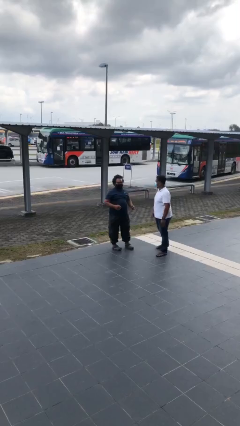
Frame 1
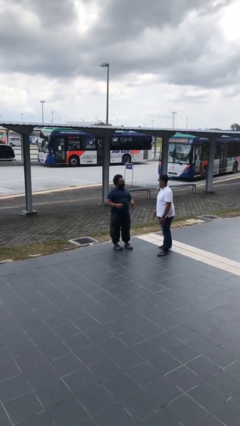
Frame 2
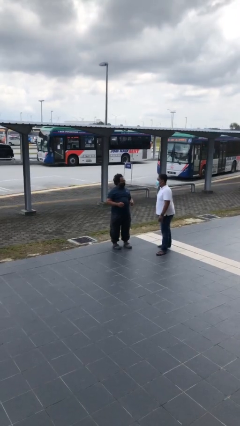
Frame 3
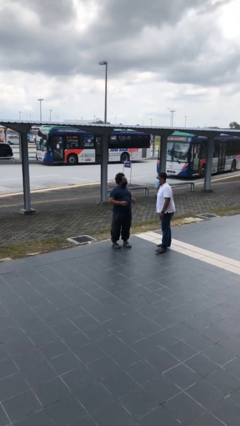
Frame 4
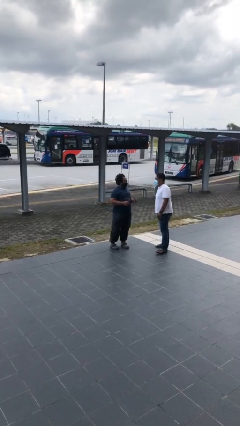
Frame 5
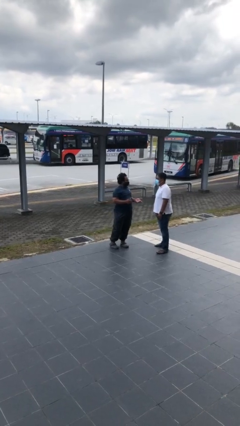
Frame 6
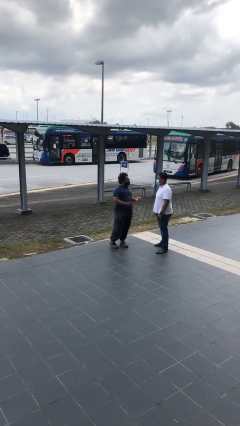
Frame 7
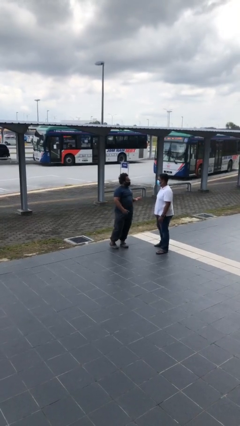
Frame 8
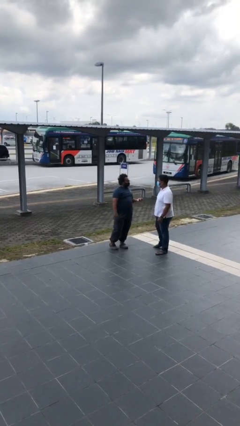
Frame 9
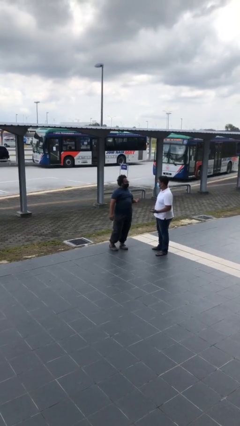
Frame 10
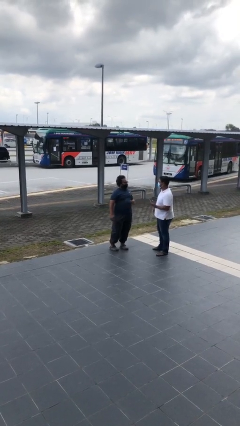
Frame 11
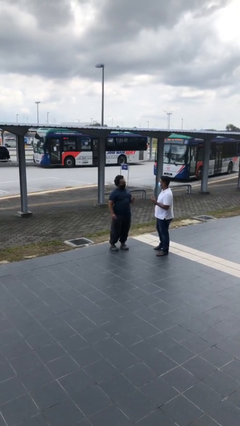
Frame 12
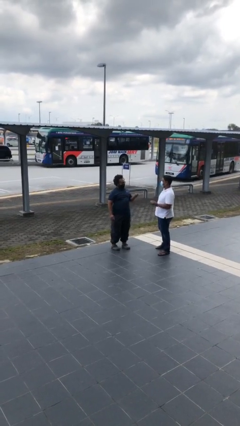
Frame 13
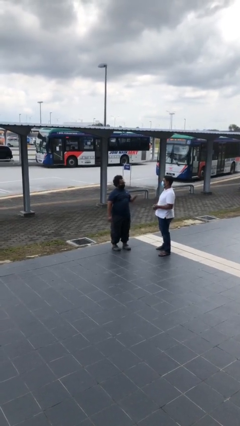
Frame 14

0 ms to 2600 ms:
person talks to person

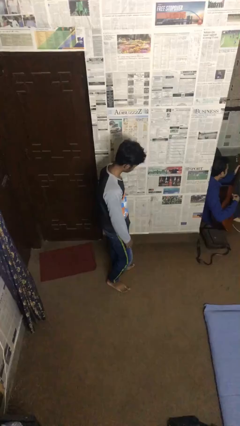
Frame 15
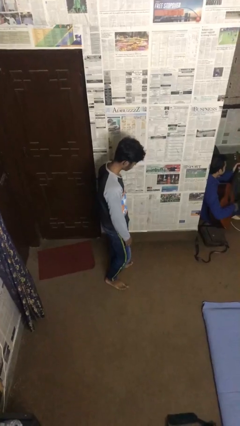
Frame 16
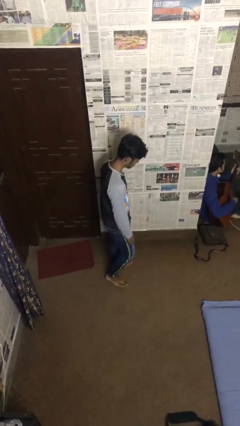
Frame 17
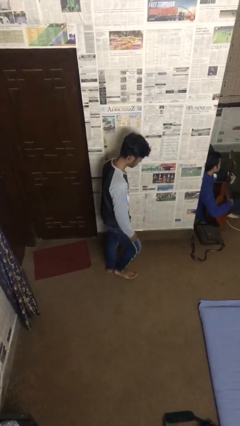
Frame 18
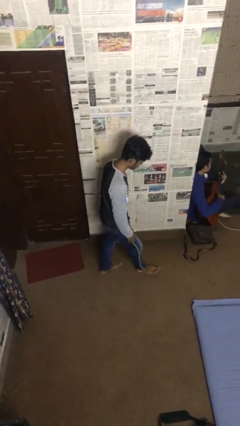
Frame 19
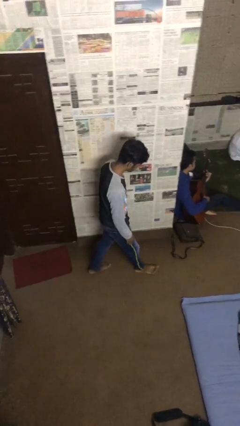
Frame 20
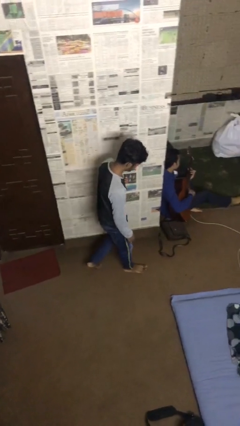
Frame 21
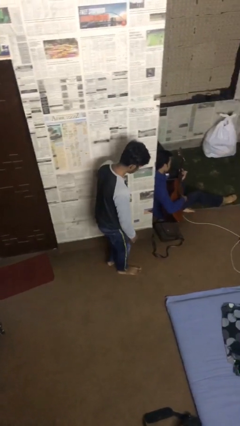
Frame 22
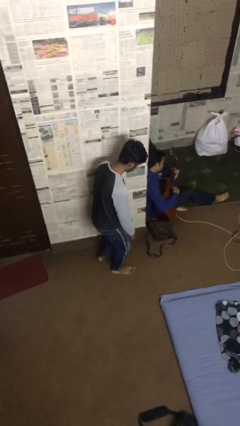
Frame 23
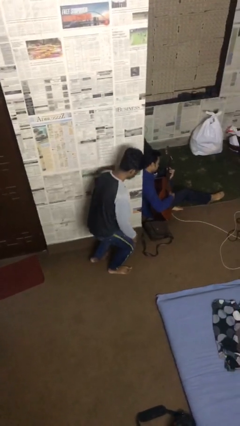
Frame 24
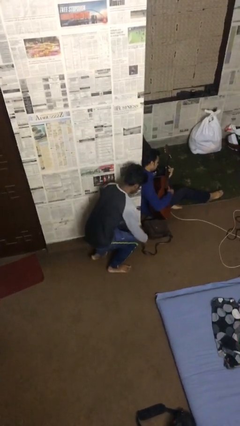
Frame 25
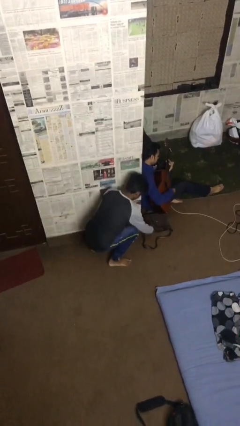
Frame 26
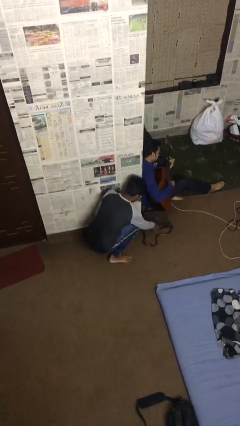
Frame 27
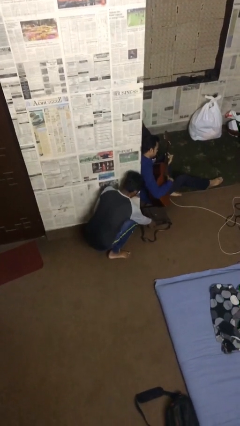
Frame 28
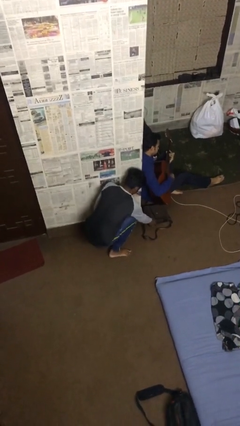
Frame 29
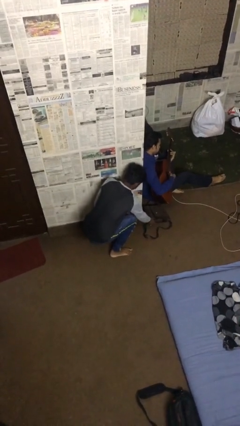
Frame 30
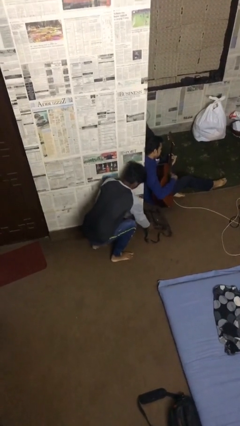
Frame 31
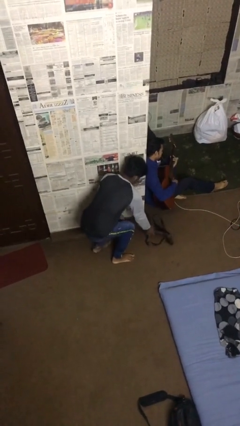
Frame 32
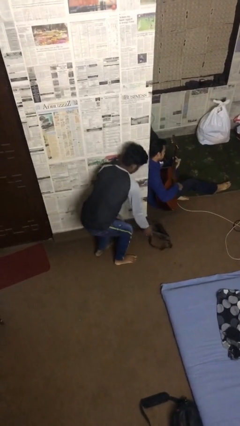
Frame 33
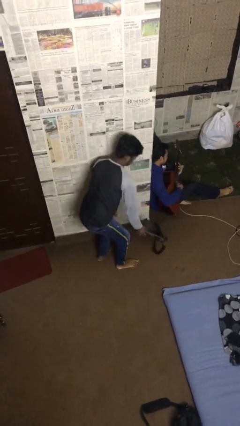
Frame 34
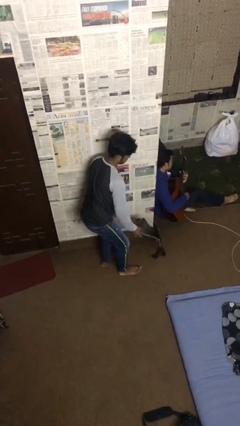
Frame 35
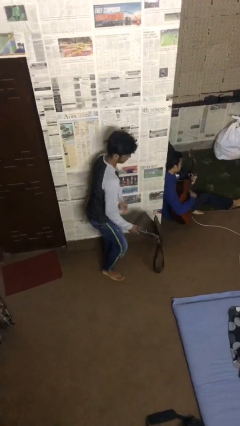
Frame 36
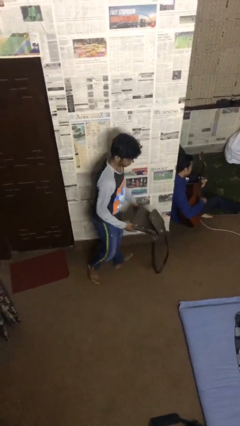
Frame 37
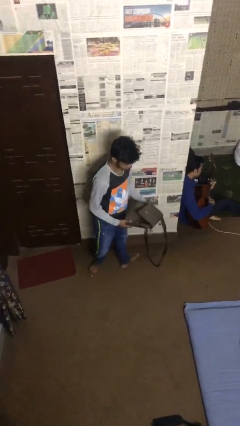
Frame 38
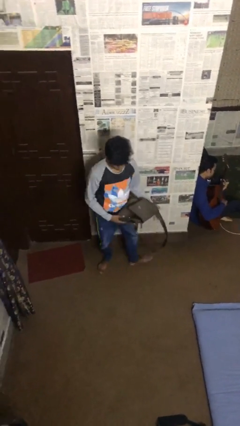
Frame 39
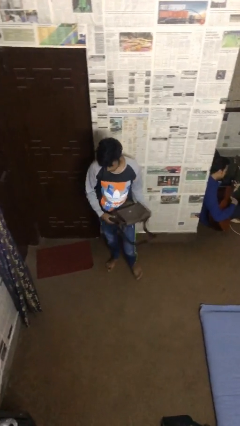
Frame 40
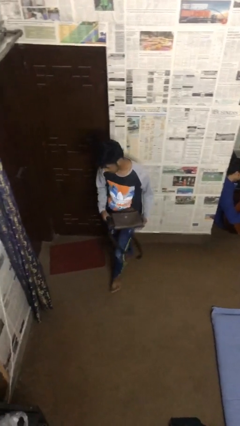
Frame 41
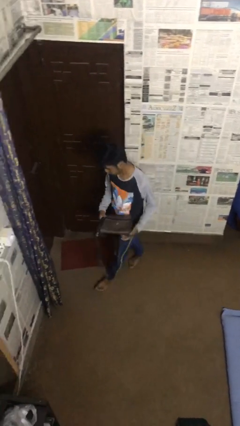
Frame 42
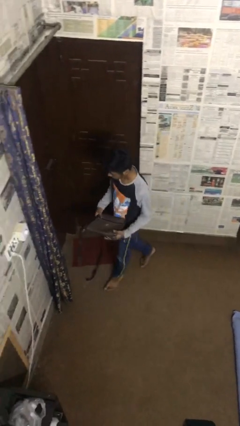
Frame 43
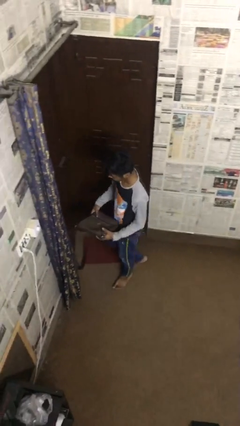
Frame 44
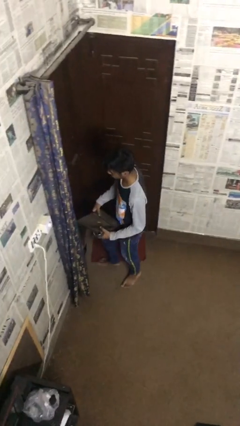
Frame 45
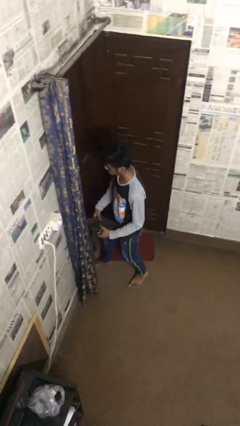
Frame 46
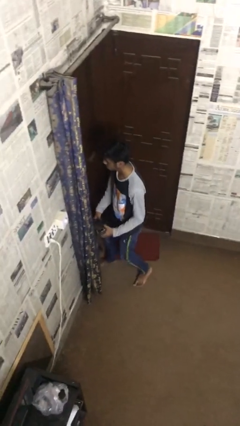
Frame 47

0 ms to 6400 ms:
person steals object from person

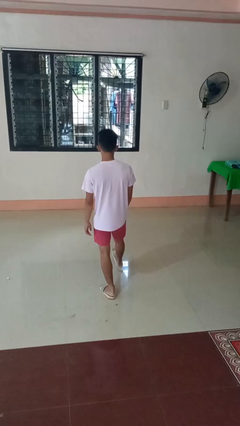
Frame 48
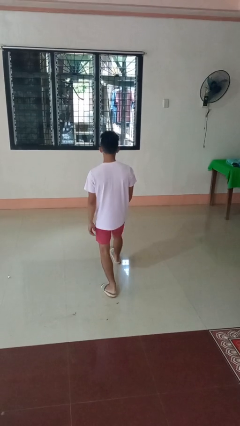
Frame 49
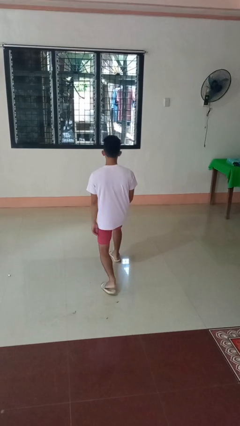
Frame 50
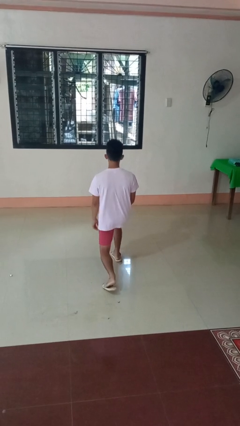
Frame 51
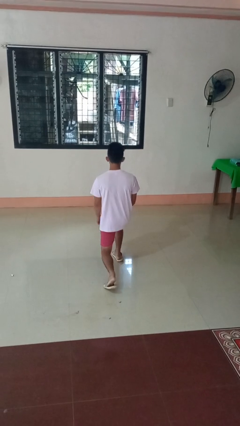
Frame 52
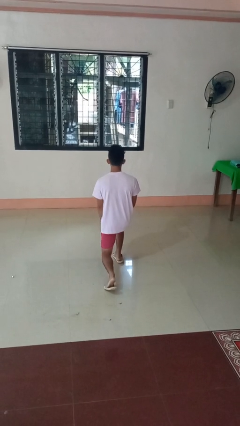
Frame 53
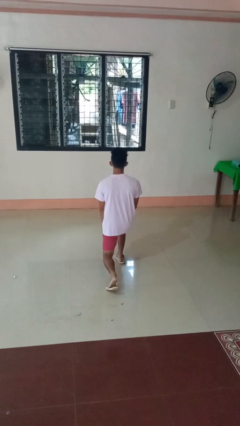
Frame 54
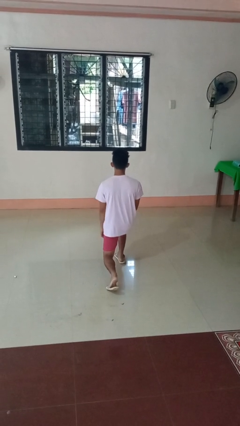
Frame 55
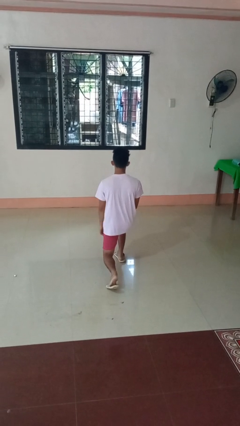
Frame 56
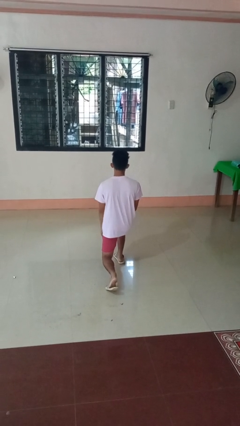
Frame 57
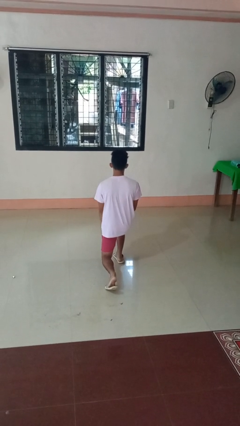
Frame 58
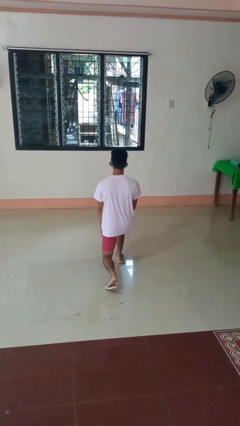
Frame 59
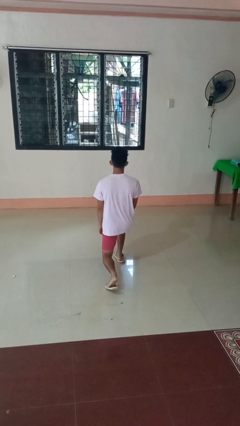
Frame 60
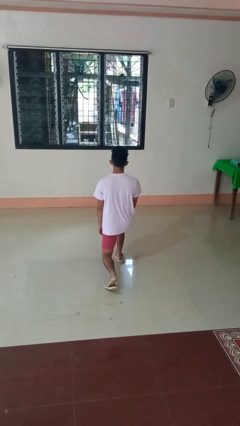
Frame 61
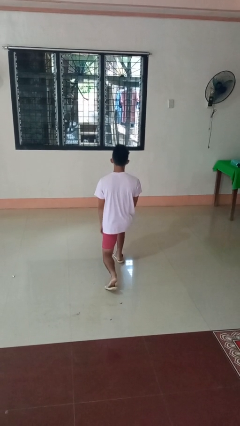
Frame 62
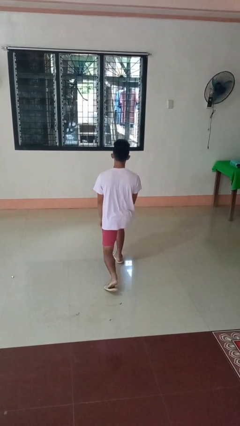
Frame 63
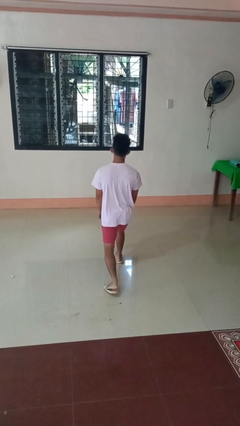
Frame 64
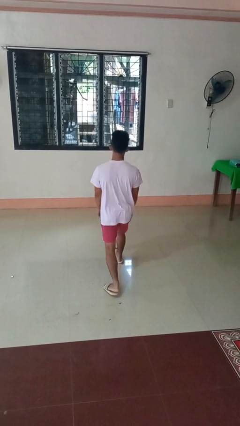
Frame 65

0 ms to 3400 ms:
person exercises with lunges

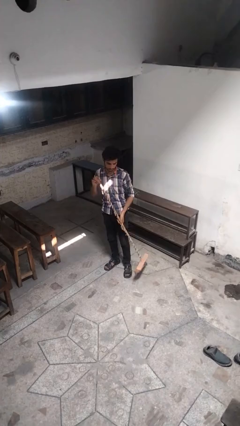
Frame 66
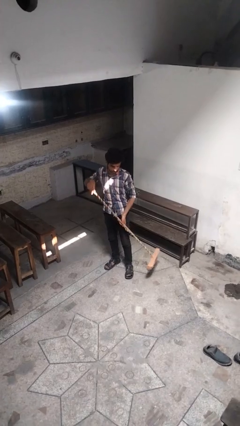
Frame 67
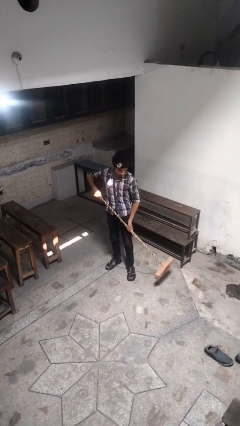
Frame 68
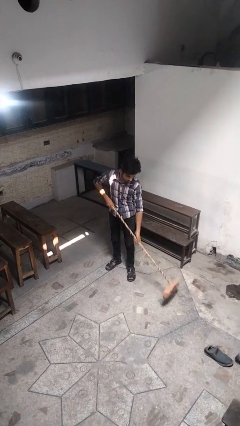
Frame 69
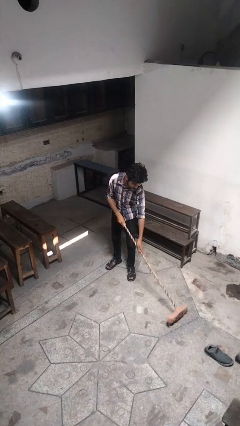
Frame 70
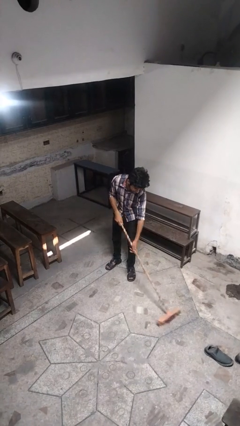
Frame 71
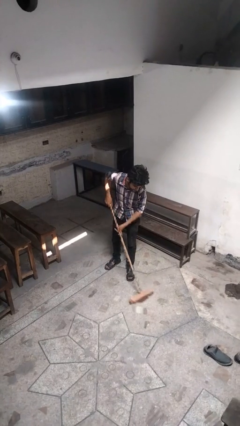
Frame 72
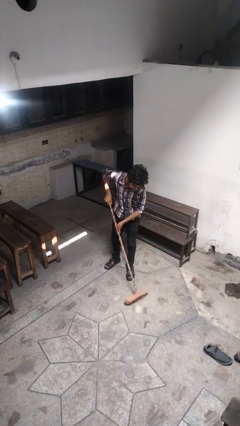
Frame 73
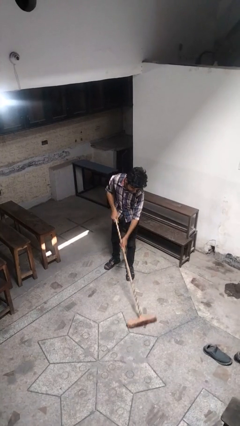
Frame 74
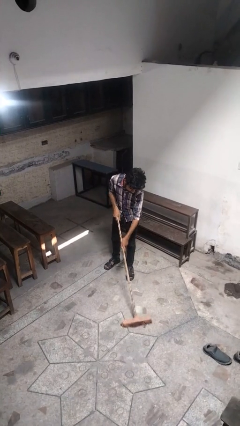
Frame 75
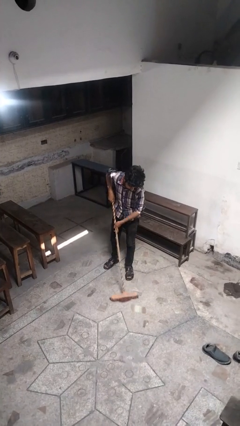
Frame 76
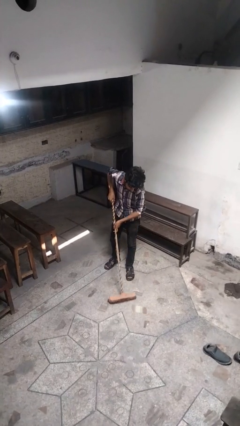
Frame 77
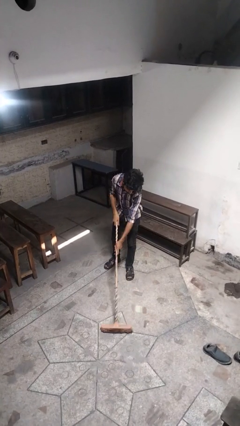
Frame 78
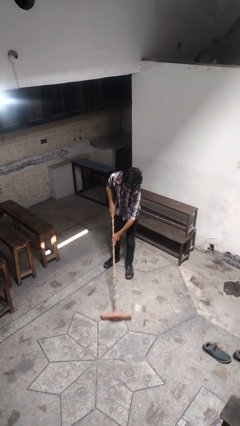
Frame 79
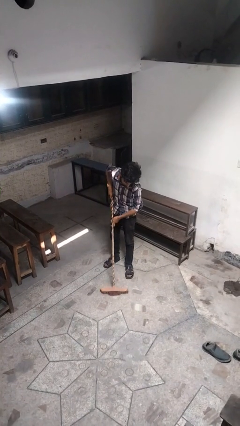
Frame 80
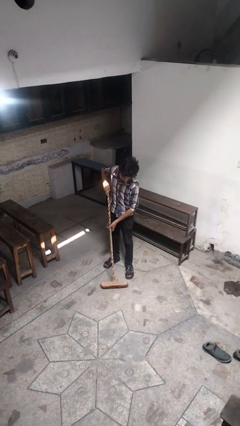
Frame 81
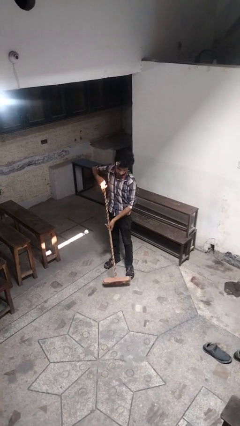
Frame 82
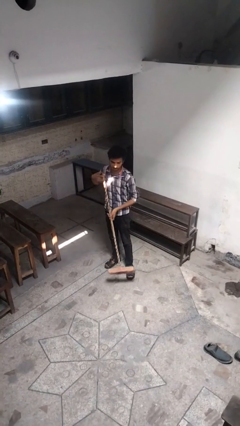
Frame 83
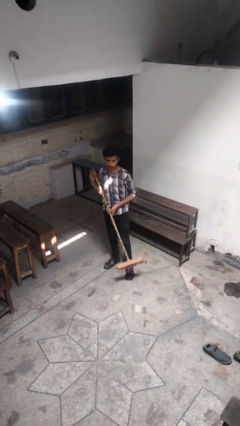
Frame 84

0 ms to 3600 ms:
person sweeps floor

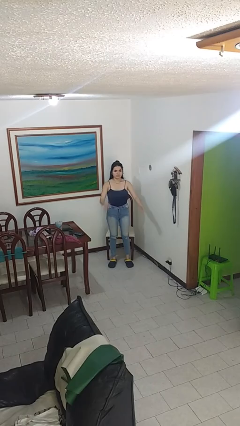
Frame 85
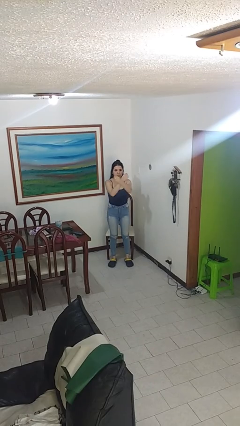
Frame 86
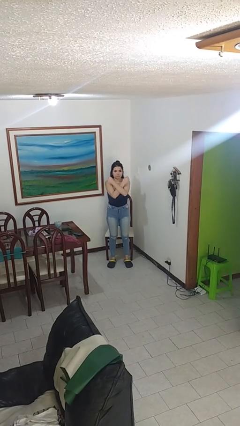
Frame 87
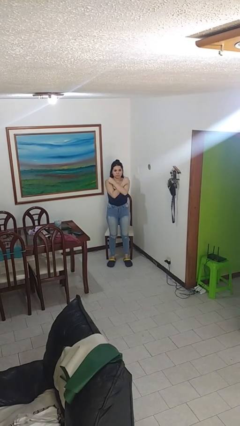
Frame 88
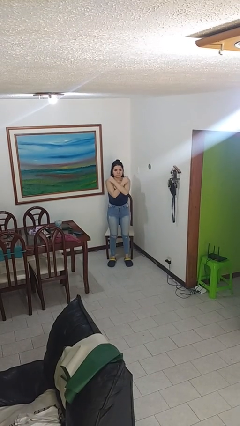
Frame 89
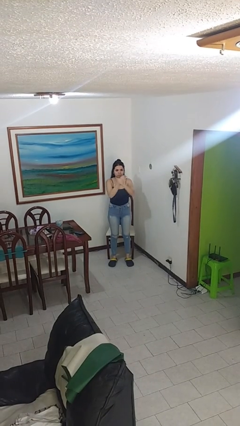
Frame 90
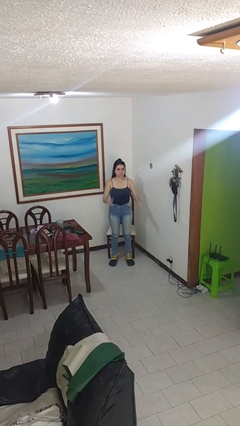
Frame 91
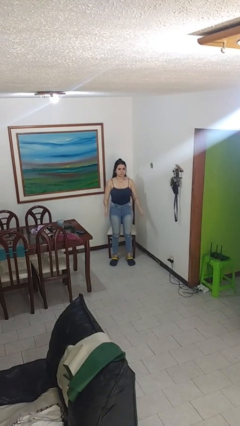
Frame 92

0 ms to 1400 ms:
person gestures arms x

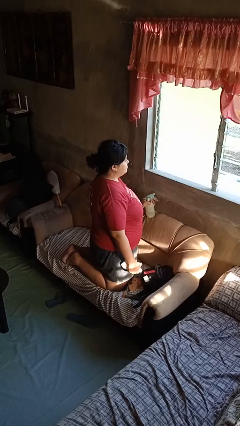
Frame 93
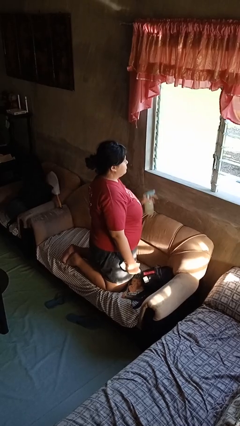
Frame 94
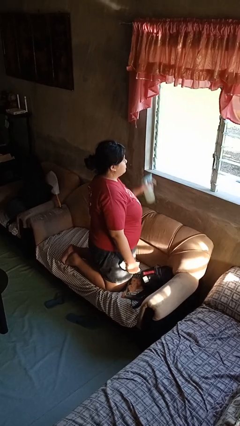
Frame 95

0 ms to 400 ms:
person sprays from bottle
